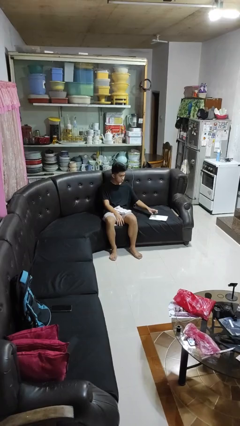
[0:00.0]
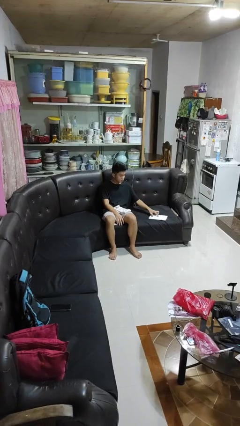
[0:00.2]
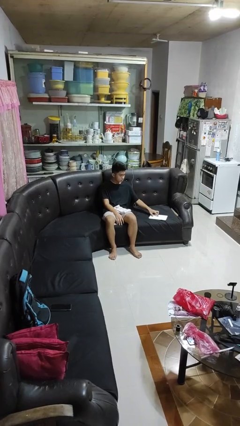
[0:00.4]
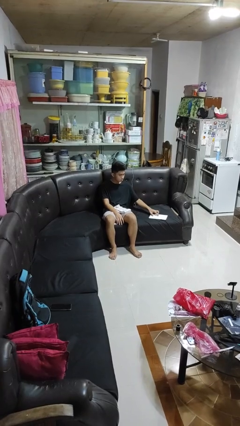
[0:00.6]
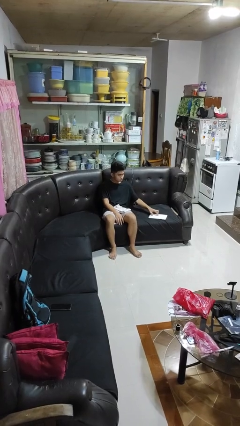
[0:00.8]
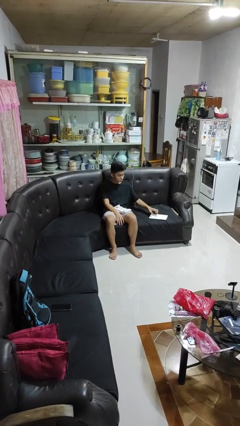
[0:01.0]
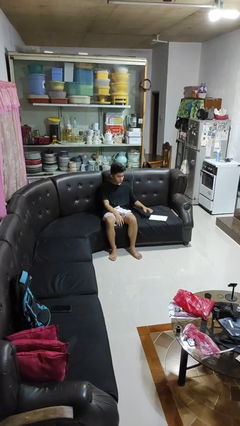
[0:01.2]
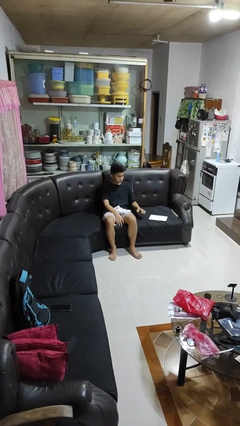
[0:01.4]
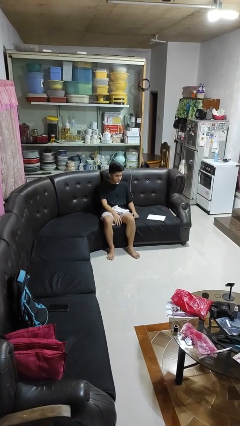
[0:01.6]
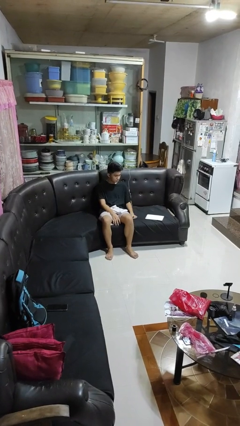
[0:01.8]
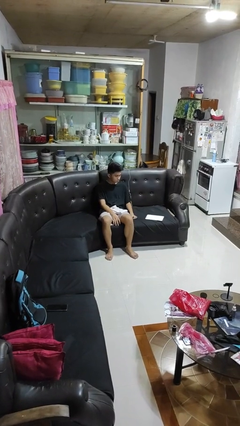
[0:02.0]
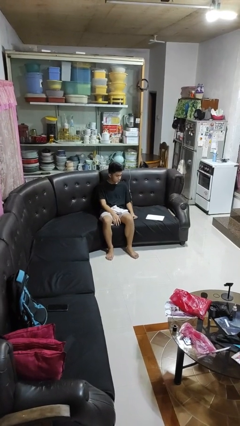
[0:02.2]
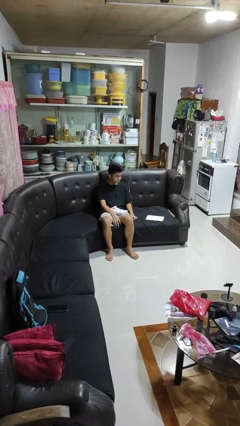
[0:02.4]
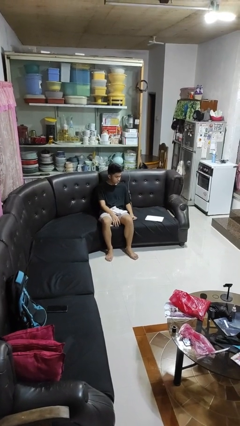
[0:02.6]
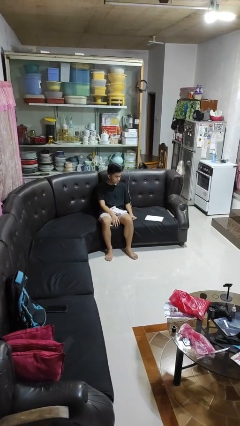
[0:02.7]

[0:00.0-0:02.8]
person taps object with finger

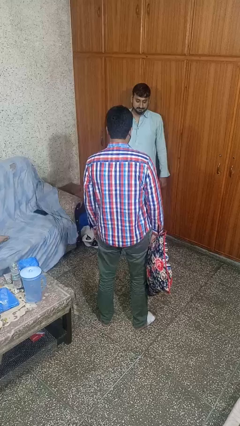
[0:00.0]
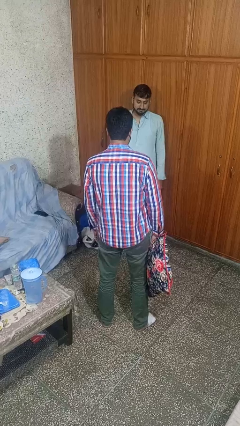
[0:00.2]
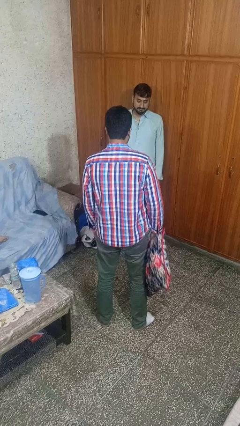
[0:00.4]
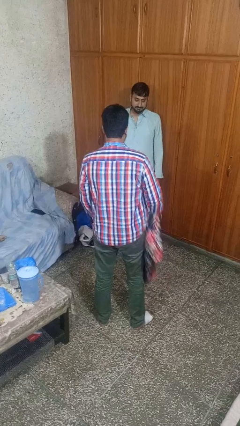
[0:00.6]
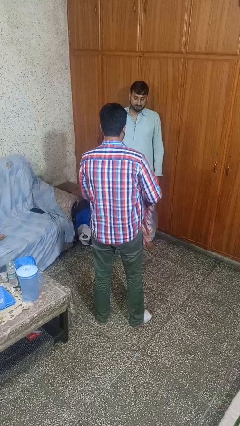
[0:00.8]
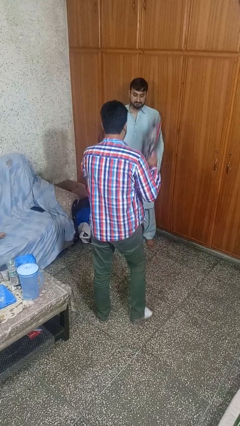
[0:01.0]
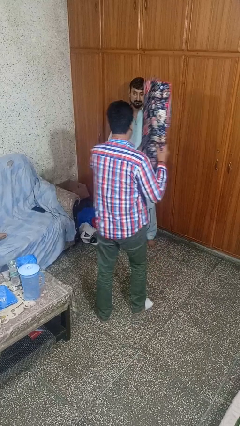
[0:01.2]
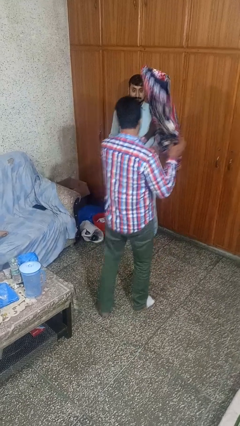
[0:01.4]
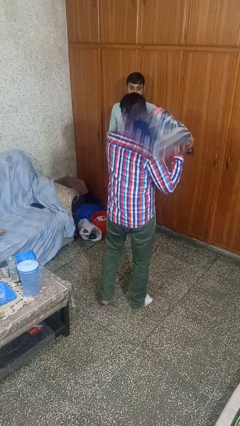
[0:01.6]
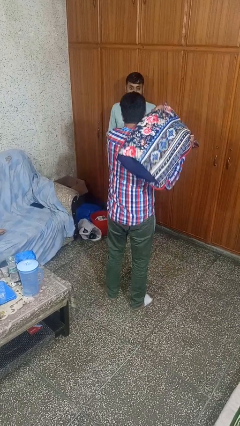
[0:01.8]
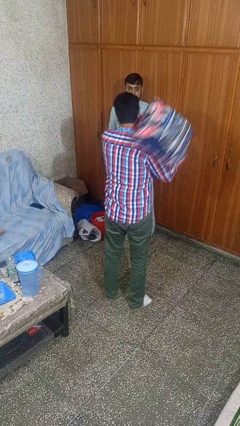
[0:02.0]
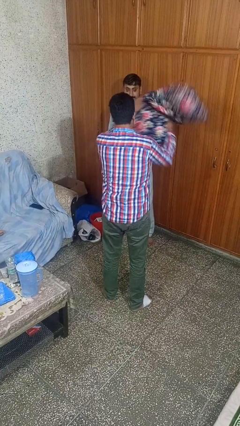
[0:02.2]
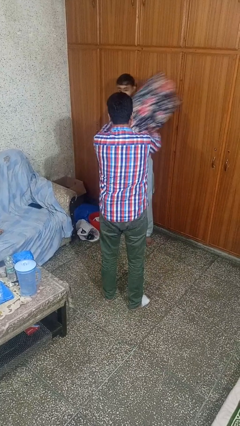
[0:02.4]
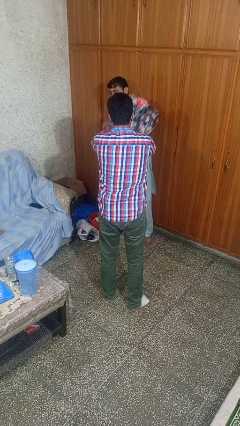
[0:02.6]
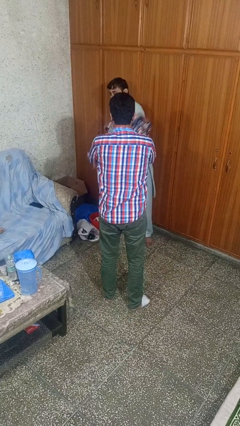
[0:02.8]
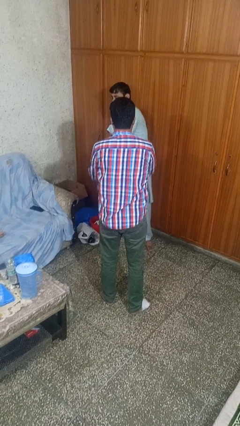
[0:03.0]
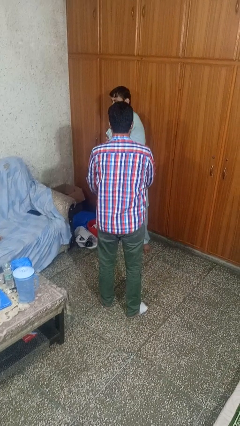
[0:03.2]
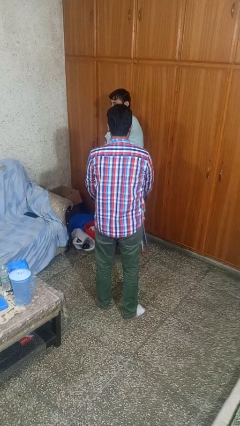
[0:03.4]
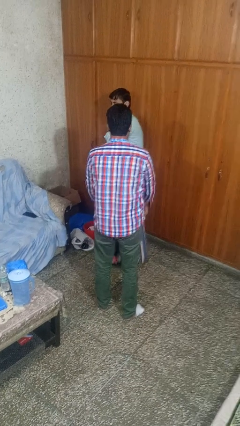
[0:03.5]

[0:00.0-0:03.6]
person hits person with pillow

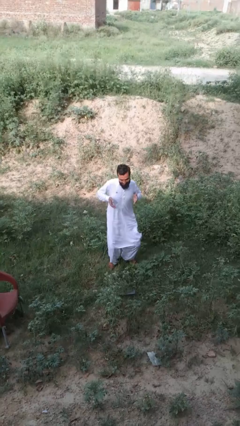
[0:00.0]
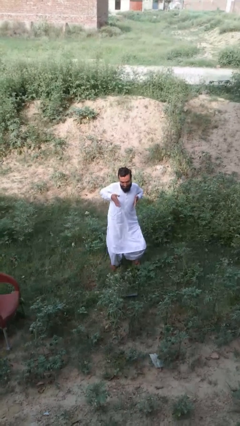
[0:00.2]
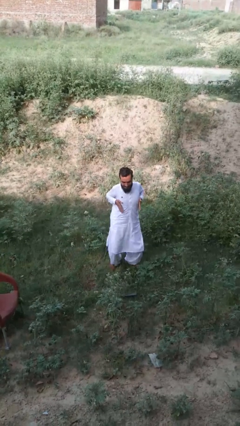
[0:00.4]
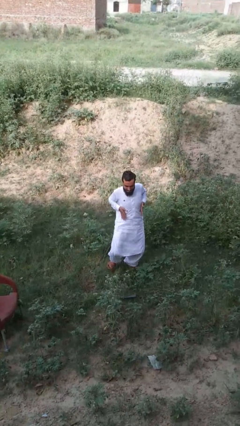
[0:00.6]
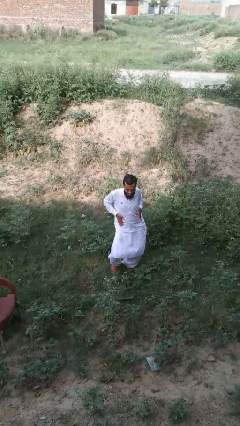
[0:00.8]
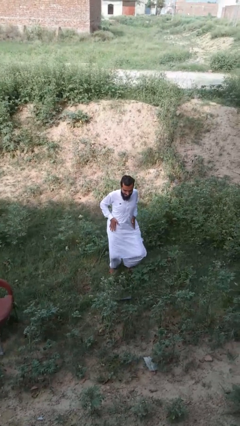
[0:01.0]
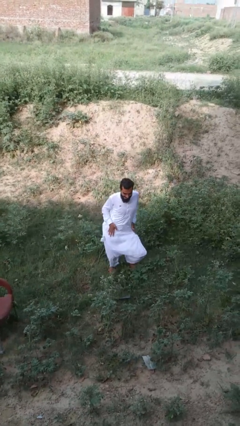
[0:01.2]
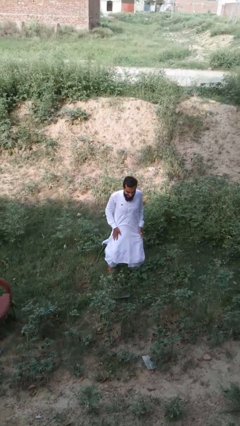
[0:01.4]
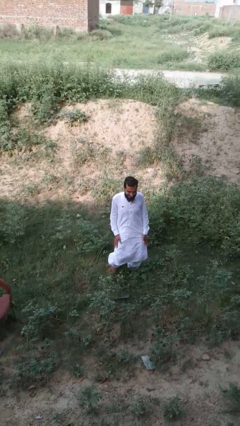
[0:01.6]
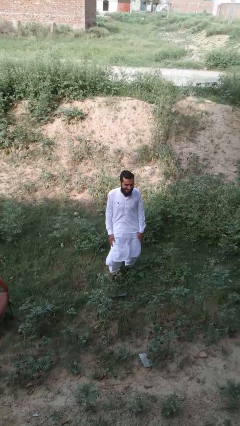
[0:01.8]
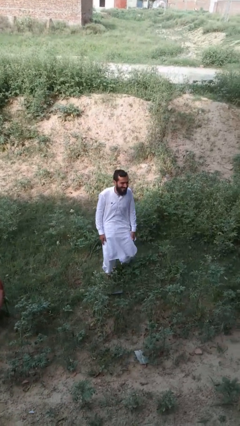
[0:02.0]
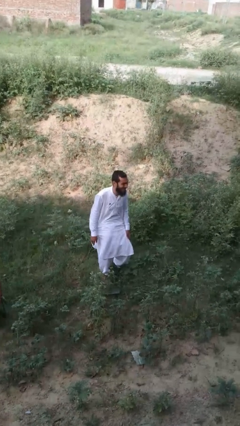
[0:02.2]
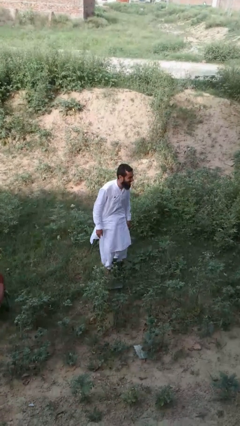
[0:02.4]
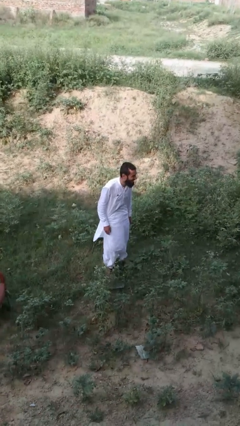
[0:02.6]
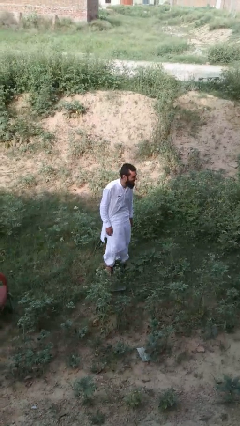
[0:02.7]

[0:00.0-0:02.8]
person dances in place

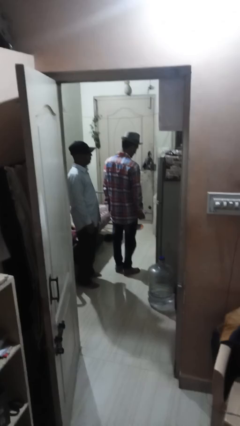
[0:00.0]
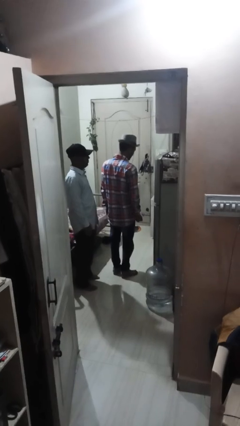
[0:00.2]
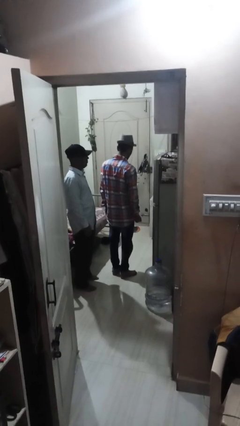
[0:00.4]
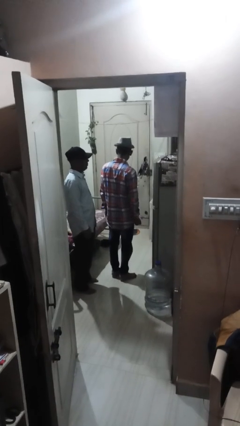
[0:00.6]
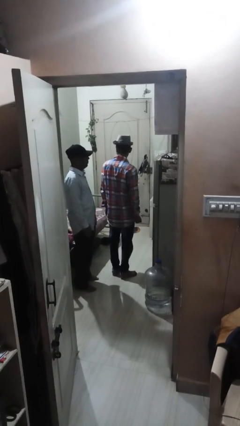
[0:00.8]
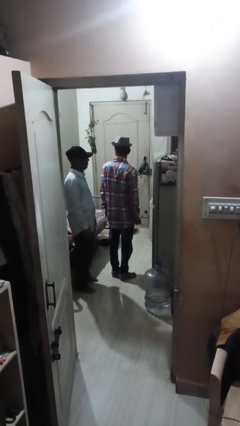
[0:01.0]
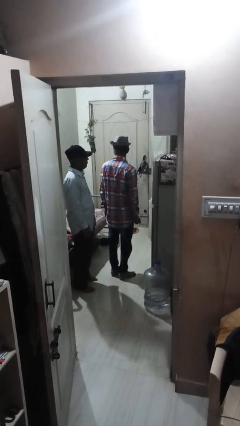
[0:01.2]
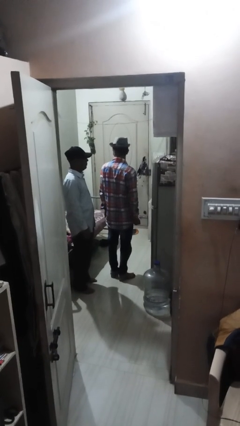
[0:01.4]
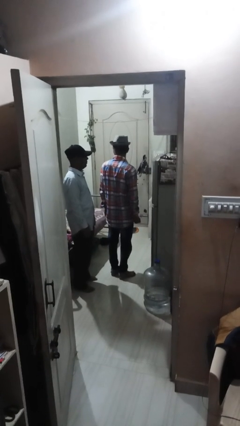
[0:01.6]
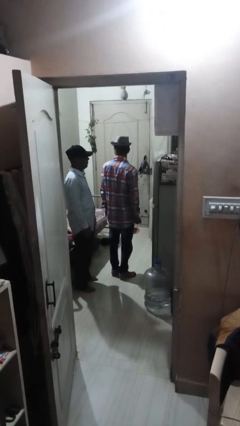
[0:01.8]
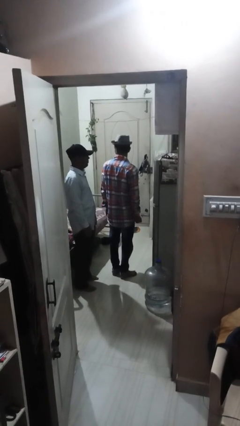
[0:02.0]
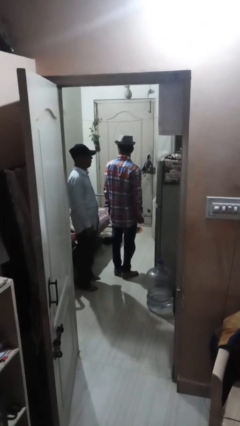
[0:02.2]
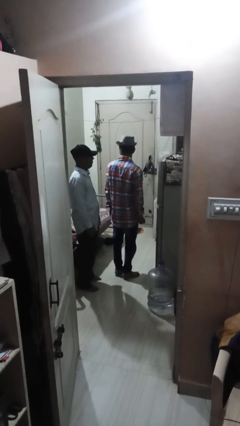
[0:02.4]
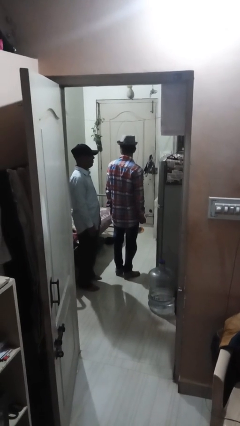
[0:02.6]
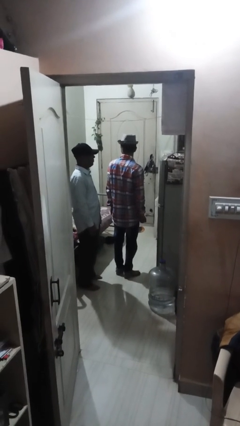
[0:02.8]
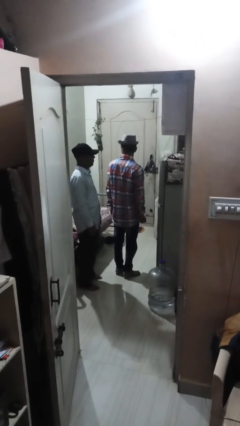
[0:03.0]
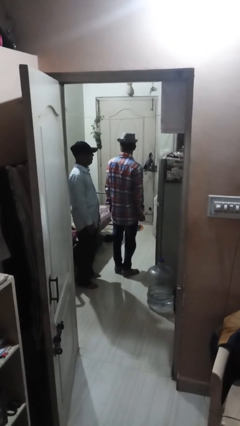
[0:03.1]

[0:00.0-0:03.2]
person looks over shoulder

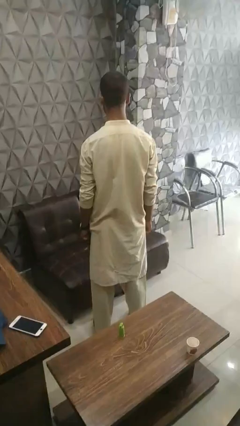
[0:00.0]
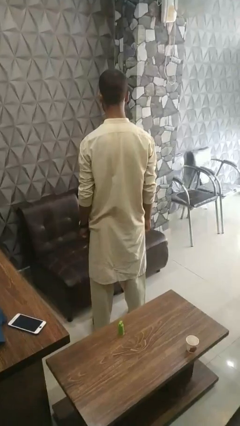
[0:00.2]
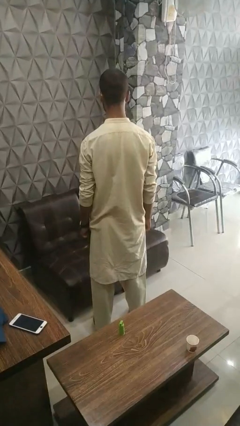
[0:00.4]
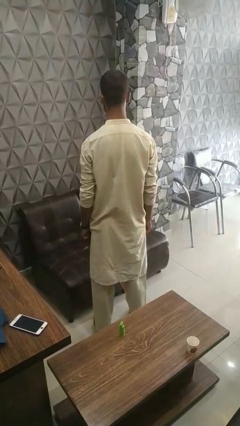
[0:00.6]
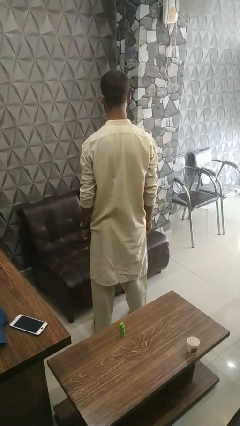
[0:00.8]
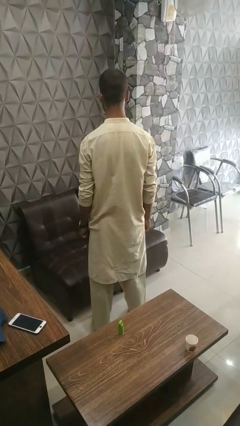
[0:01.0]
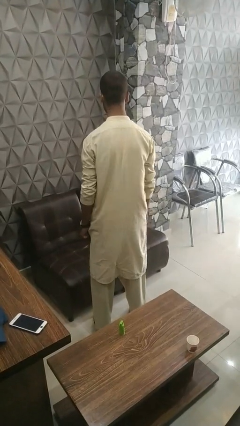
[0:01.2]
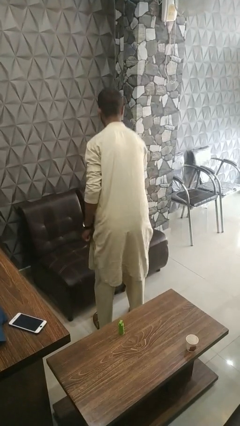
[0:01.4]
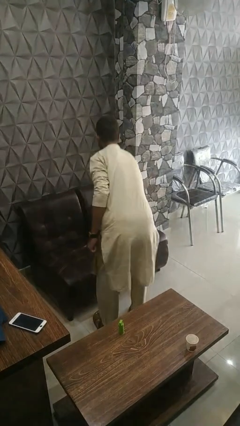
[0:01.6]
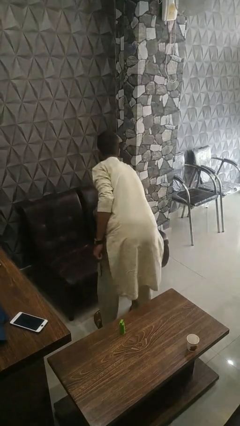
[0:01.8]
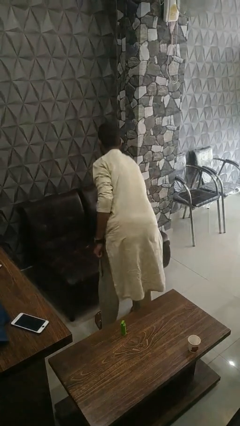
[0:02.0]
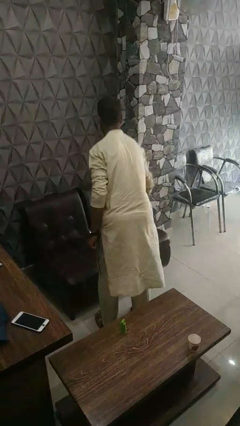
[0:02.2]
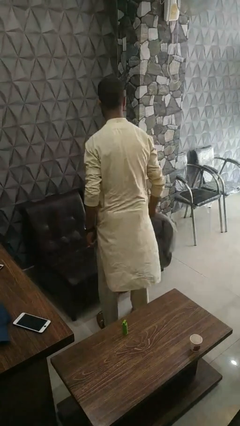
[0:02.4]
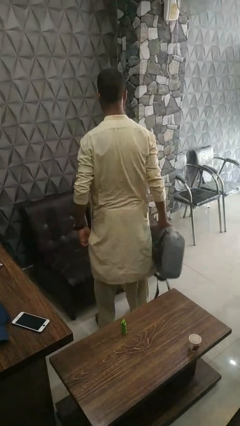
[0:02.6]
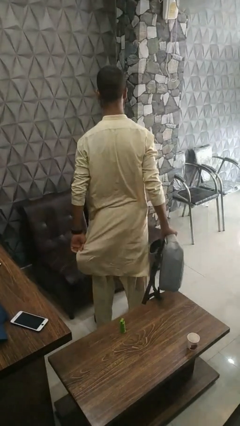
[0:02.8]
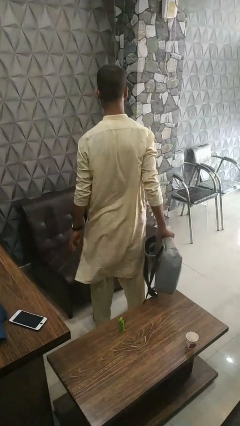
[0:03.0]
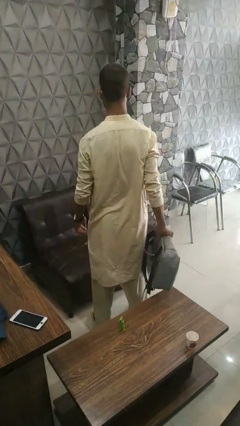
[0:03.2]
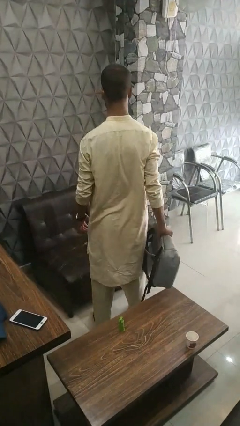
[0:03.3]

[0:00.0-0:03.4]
person searches in couch

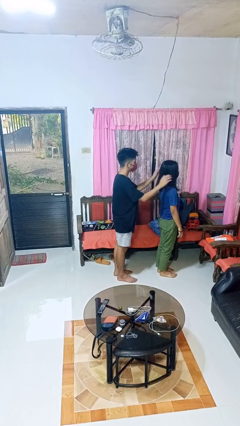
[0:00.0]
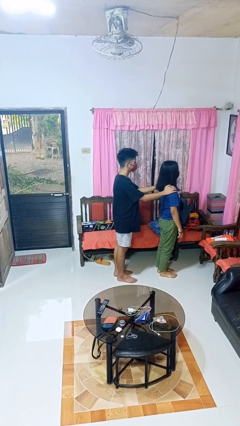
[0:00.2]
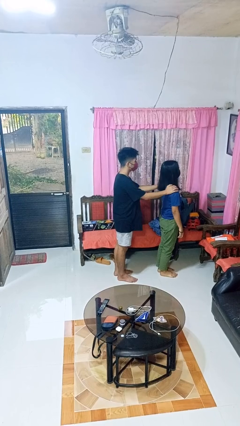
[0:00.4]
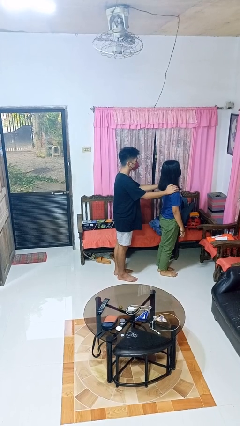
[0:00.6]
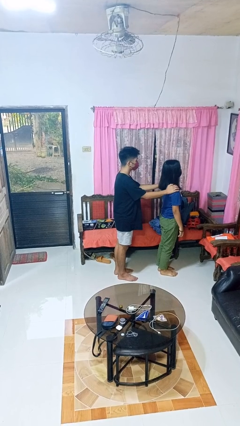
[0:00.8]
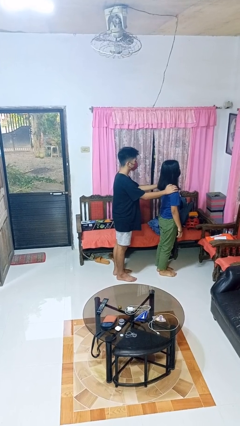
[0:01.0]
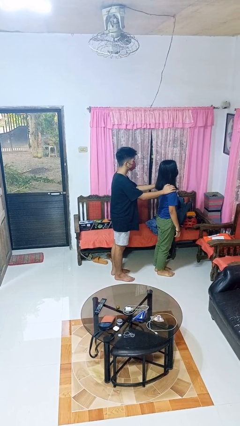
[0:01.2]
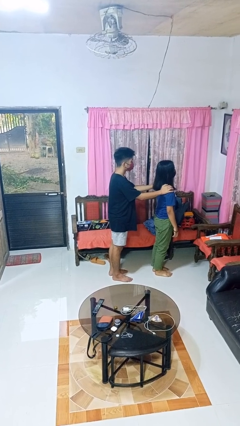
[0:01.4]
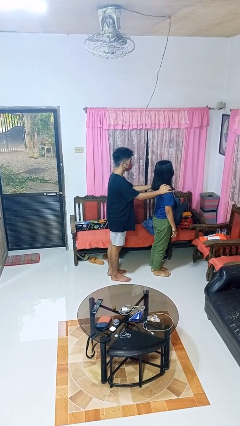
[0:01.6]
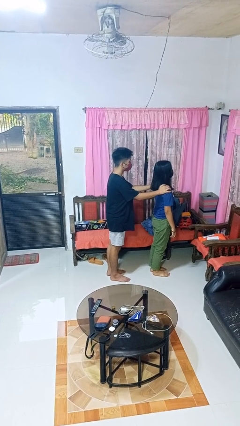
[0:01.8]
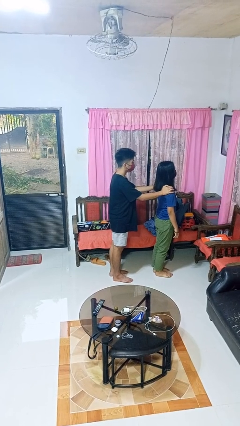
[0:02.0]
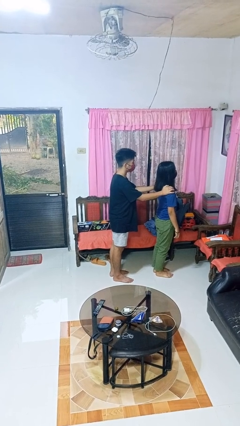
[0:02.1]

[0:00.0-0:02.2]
person grabs person by shoulder
